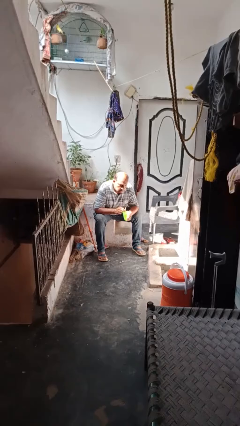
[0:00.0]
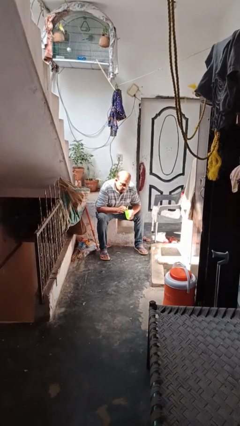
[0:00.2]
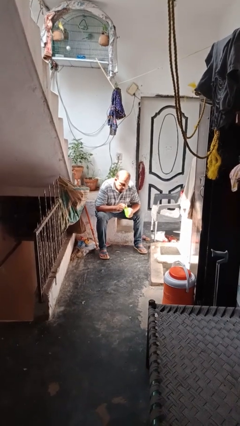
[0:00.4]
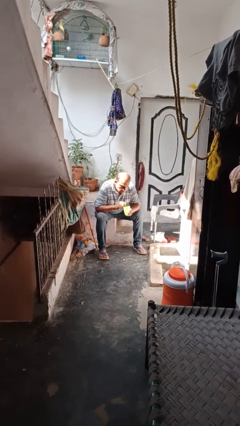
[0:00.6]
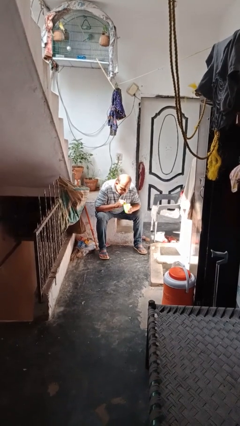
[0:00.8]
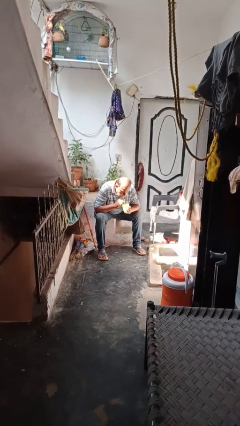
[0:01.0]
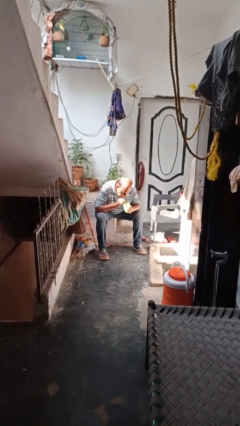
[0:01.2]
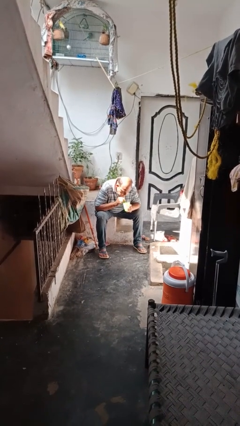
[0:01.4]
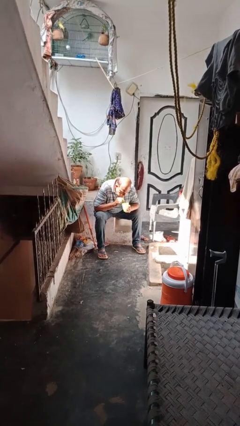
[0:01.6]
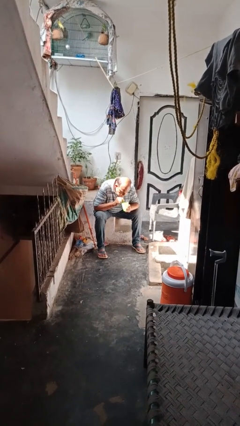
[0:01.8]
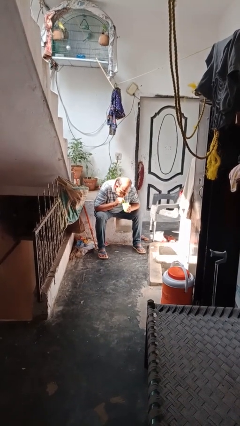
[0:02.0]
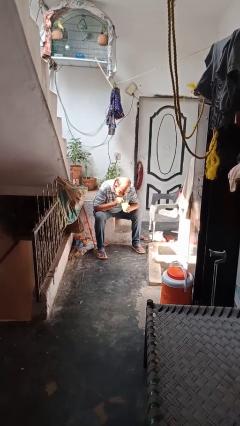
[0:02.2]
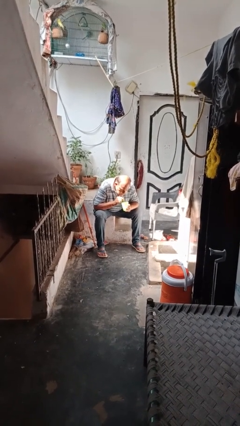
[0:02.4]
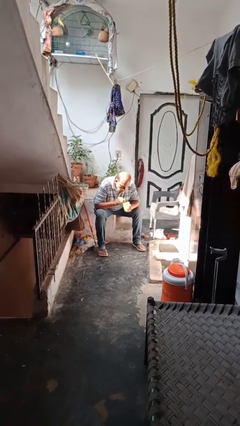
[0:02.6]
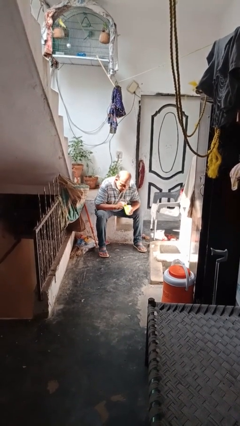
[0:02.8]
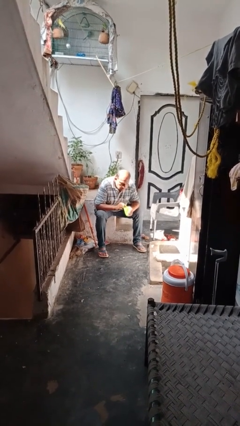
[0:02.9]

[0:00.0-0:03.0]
person drinks from straw

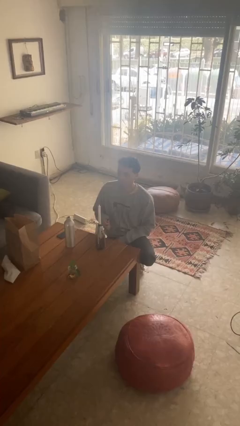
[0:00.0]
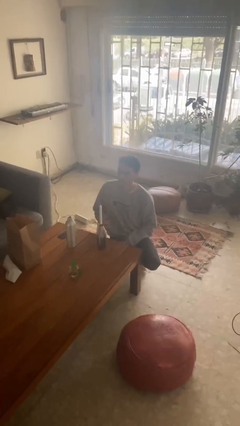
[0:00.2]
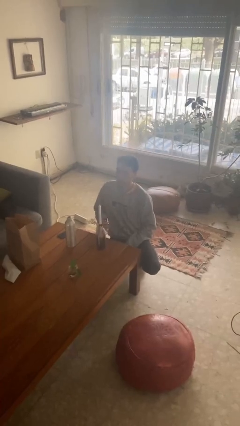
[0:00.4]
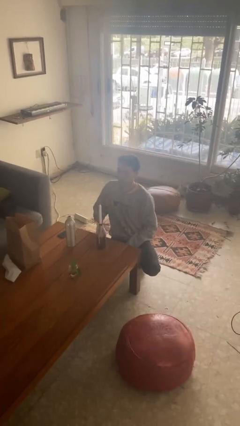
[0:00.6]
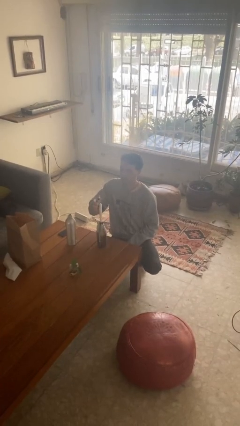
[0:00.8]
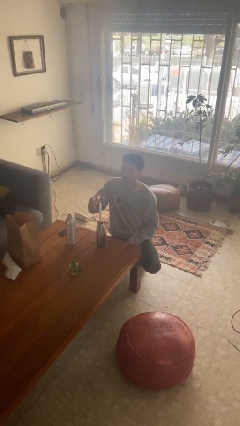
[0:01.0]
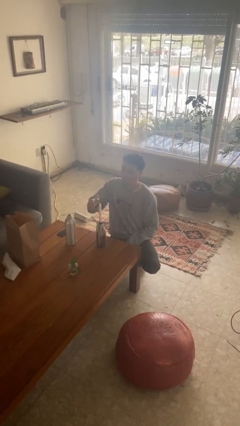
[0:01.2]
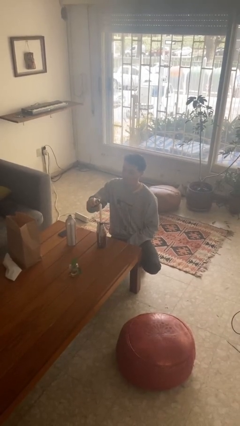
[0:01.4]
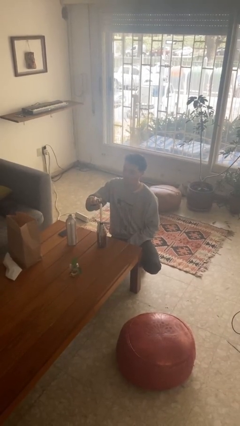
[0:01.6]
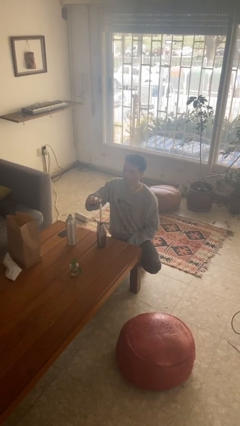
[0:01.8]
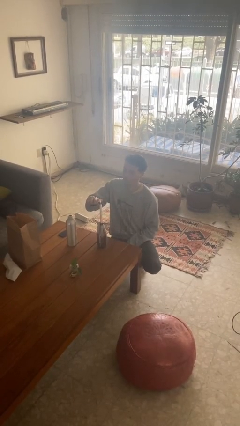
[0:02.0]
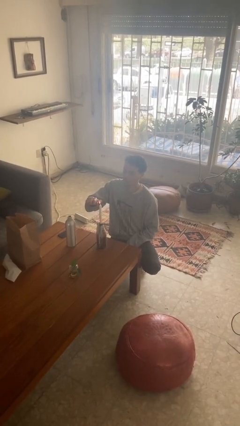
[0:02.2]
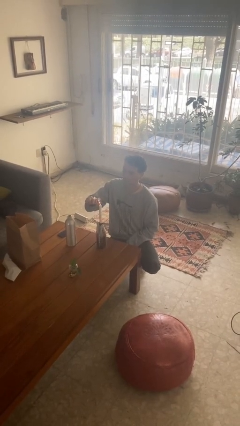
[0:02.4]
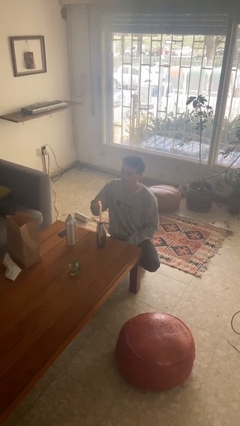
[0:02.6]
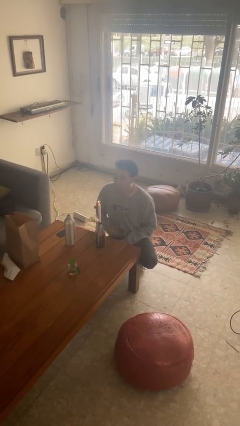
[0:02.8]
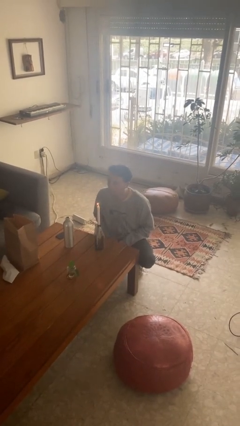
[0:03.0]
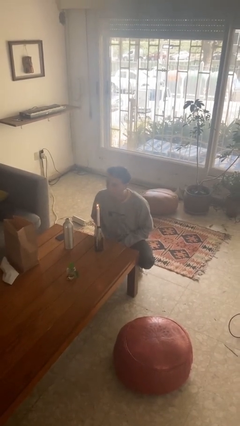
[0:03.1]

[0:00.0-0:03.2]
person lights candle

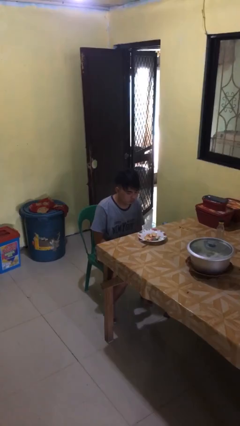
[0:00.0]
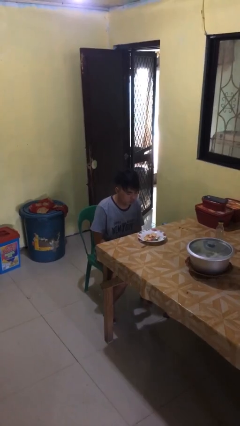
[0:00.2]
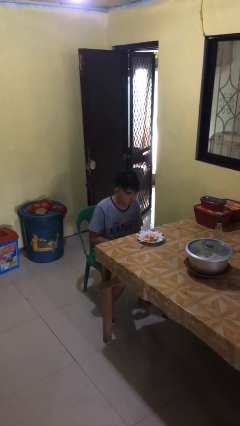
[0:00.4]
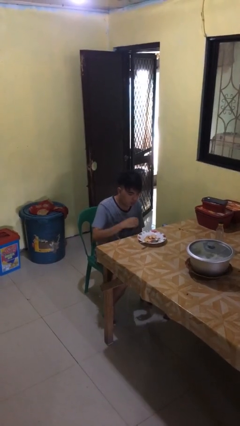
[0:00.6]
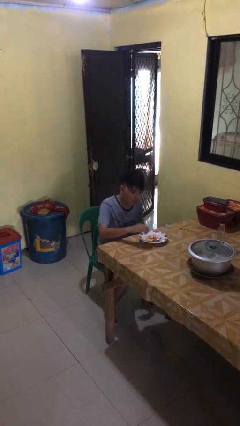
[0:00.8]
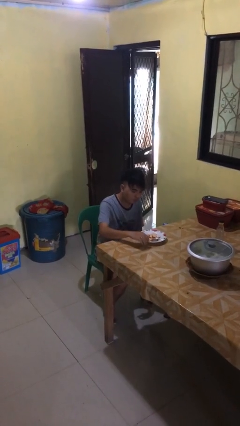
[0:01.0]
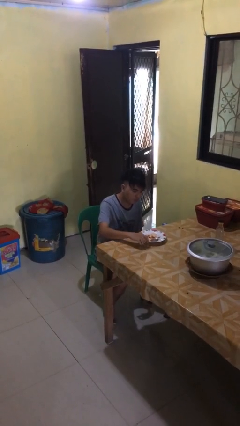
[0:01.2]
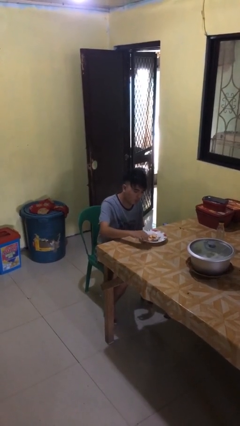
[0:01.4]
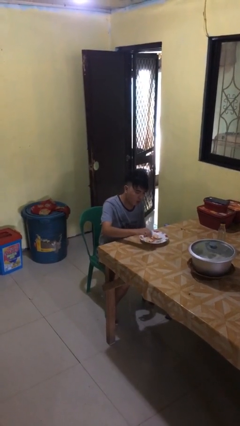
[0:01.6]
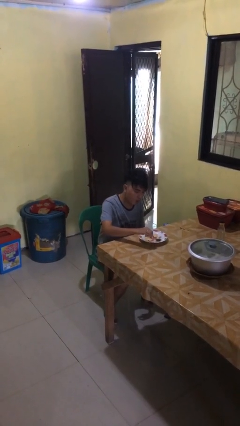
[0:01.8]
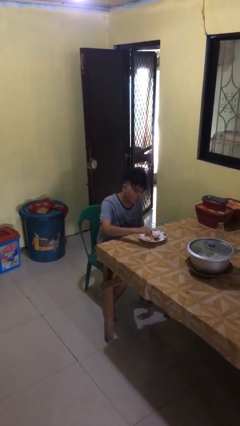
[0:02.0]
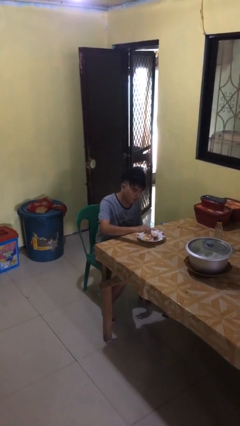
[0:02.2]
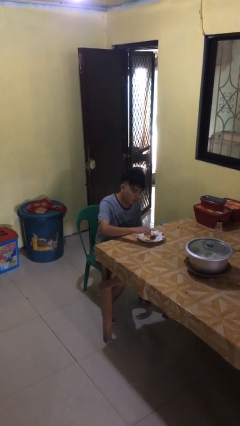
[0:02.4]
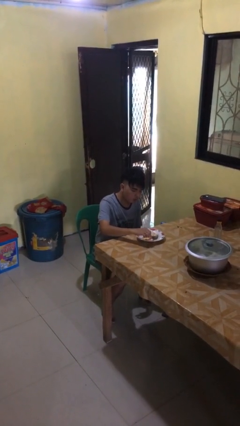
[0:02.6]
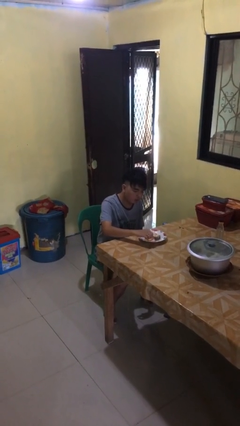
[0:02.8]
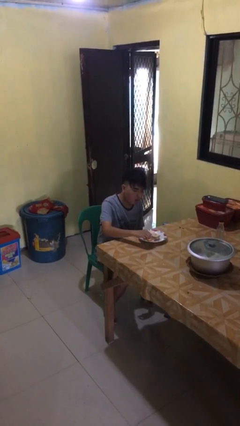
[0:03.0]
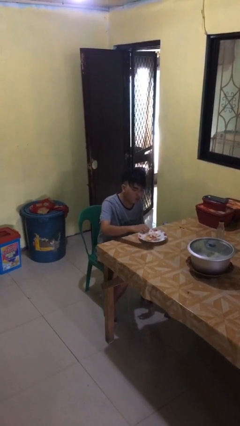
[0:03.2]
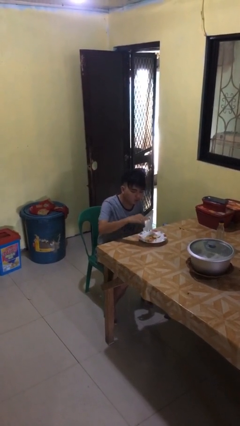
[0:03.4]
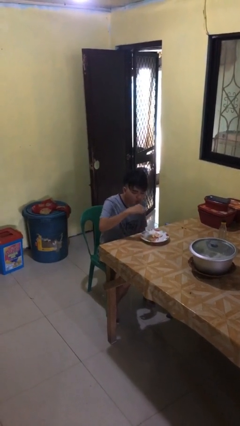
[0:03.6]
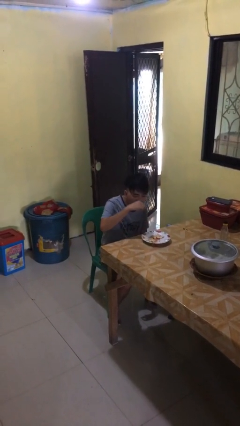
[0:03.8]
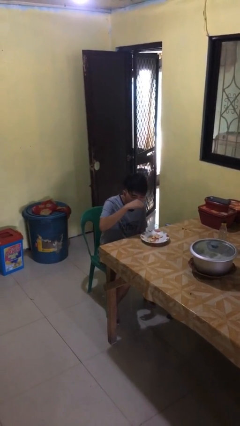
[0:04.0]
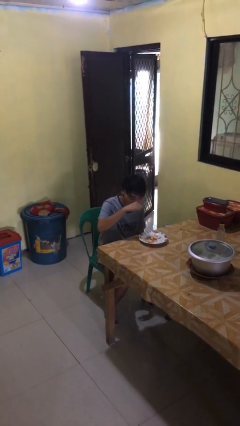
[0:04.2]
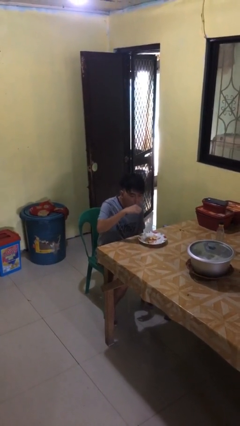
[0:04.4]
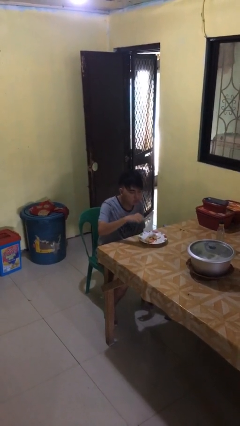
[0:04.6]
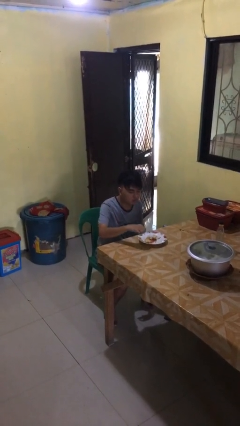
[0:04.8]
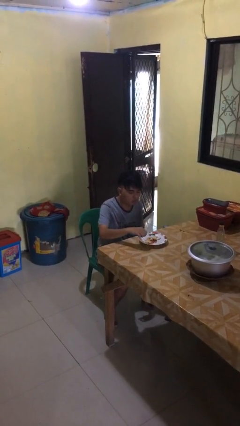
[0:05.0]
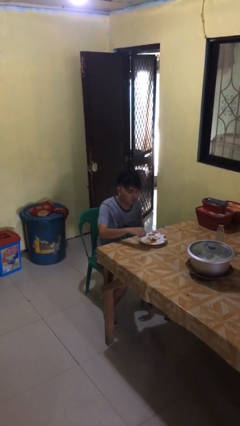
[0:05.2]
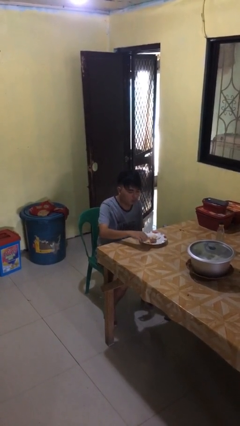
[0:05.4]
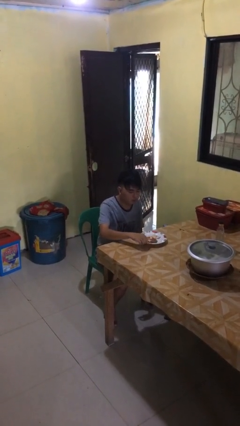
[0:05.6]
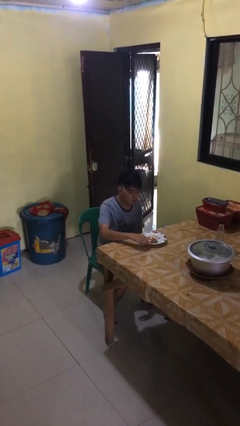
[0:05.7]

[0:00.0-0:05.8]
person eats with utensil

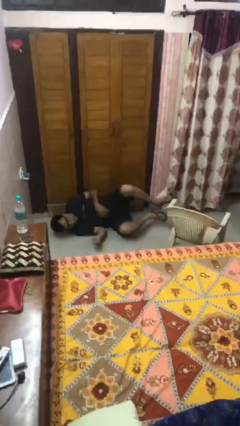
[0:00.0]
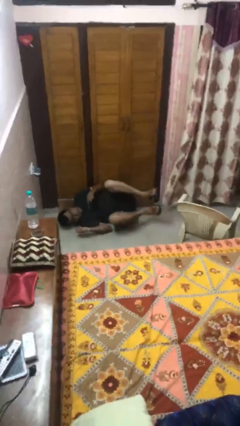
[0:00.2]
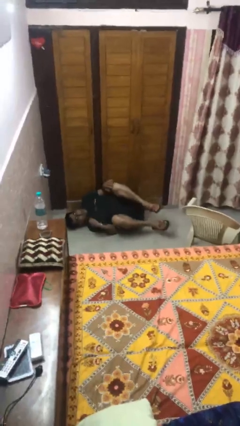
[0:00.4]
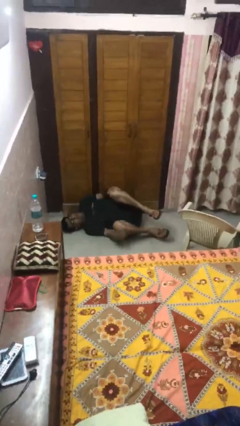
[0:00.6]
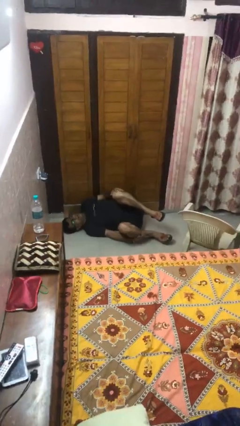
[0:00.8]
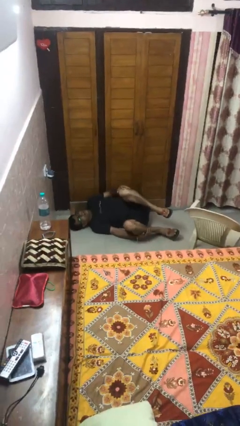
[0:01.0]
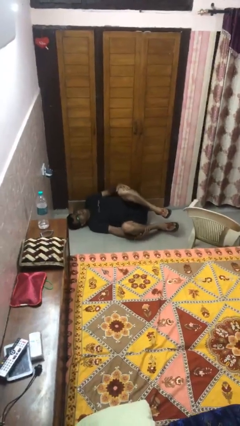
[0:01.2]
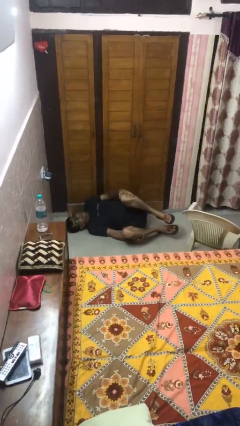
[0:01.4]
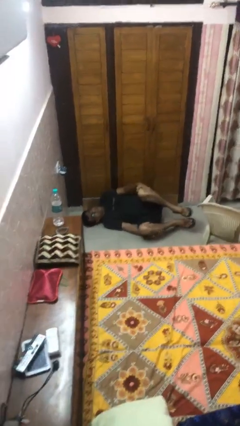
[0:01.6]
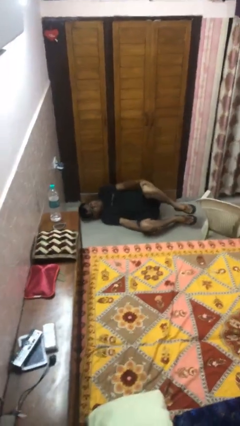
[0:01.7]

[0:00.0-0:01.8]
person lies down on floor

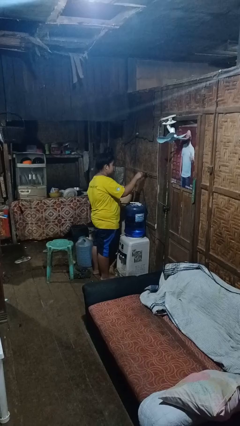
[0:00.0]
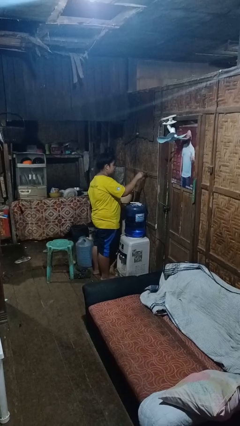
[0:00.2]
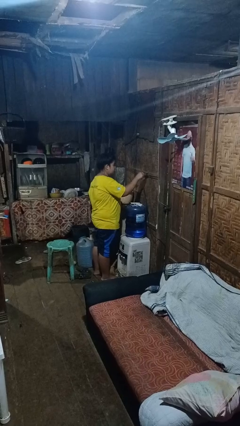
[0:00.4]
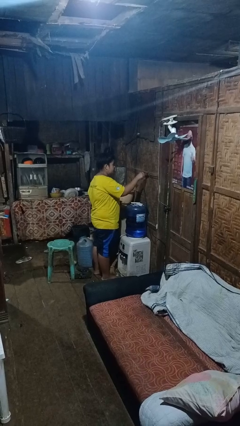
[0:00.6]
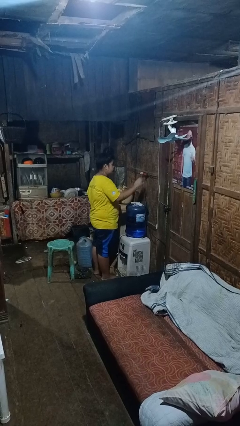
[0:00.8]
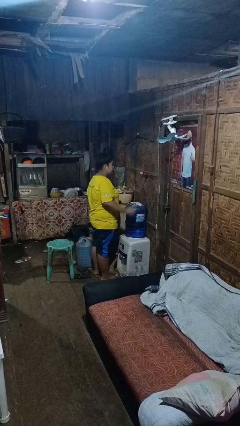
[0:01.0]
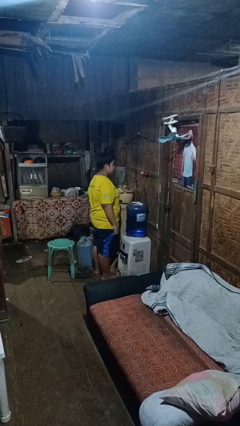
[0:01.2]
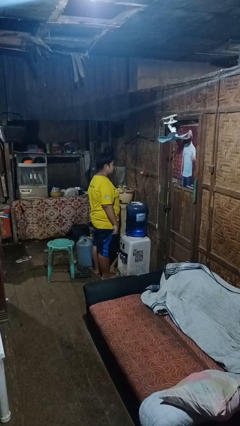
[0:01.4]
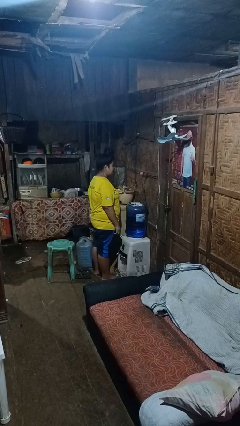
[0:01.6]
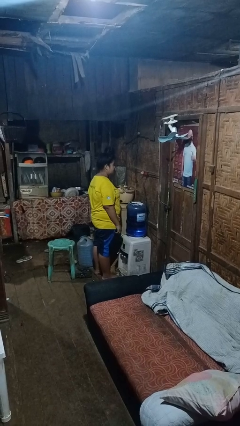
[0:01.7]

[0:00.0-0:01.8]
person plugs into electrical socket

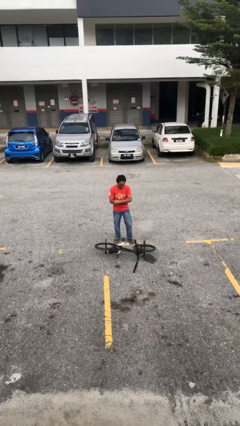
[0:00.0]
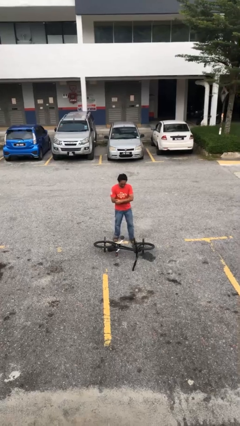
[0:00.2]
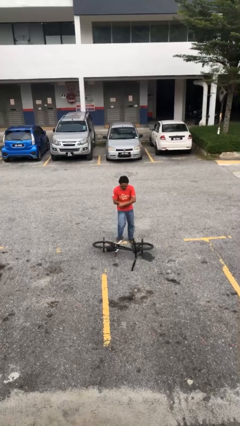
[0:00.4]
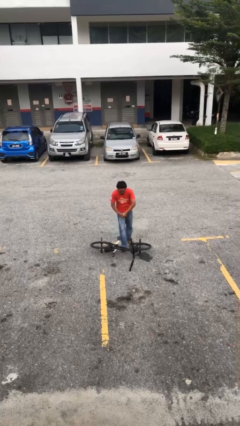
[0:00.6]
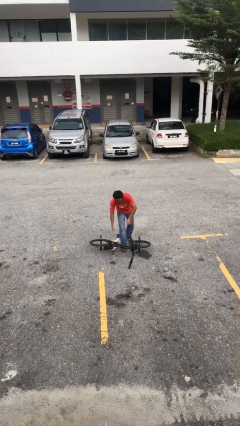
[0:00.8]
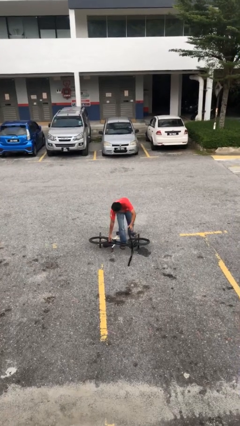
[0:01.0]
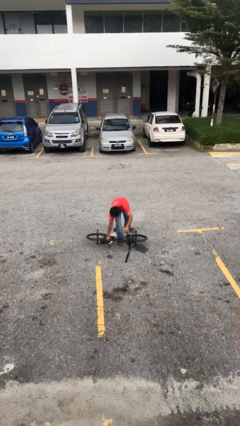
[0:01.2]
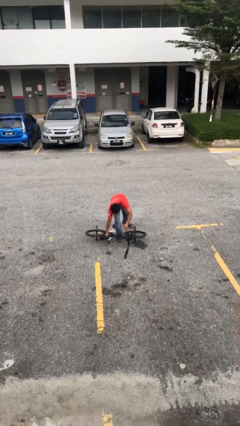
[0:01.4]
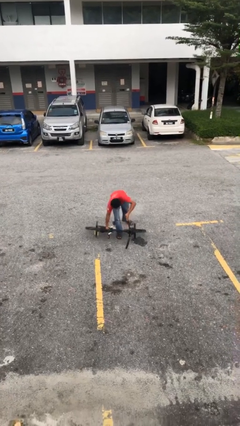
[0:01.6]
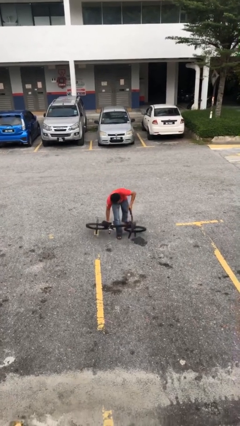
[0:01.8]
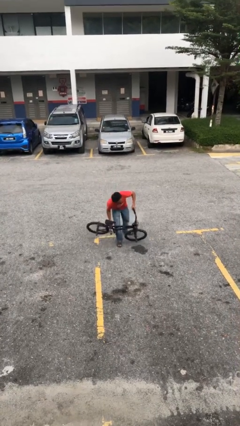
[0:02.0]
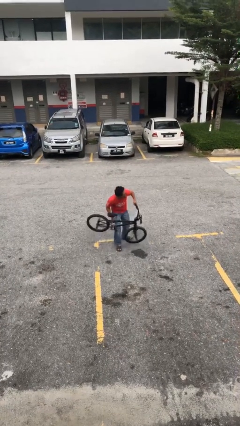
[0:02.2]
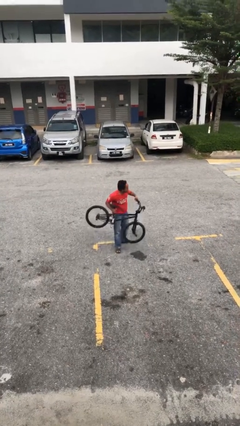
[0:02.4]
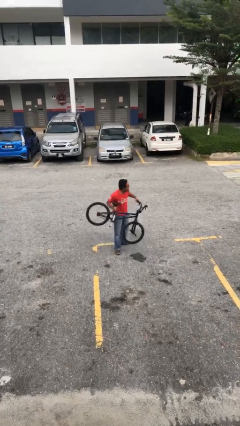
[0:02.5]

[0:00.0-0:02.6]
person picks up object from floor
